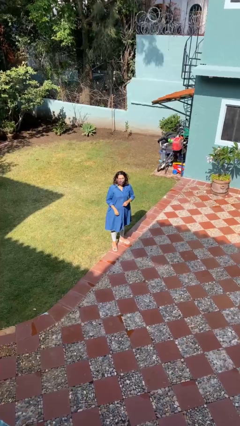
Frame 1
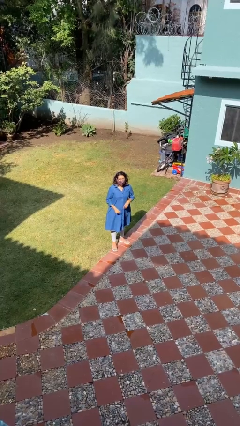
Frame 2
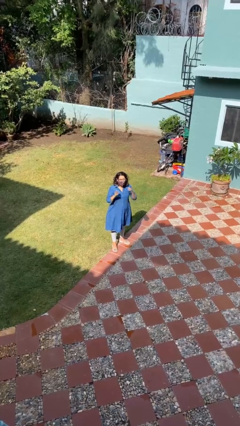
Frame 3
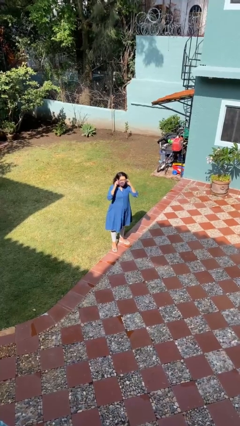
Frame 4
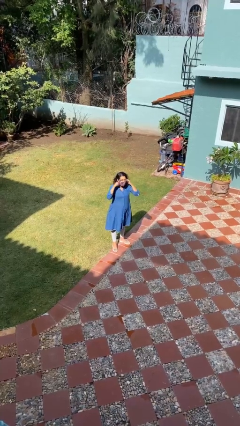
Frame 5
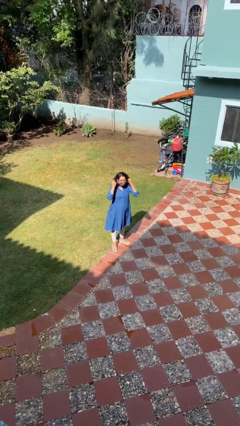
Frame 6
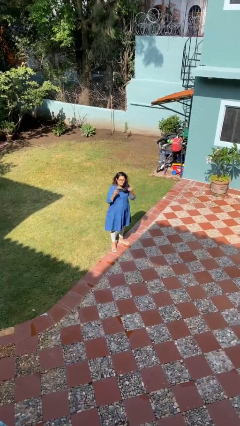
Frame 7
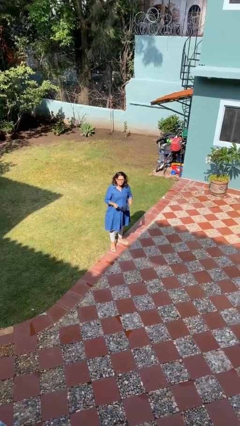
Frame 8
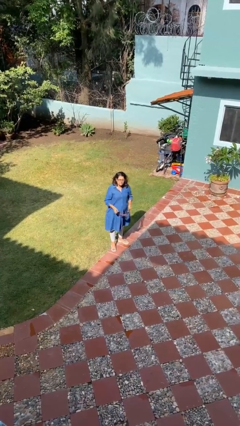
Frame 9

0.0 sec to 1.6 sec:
person takes off facemask

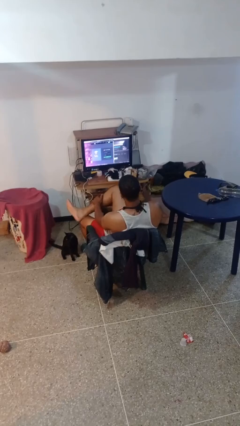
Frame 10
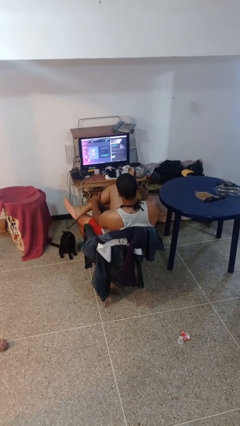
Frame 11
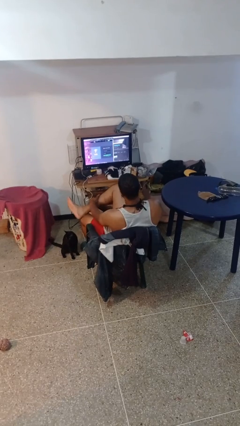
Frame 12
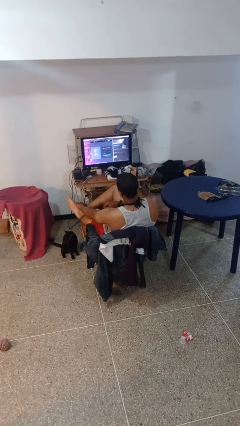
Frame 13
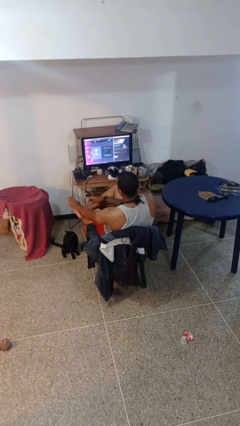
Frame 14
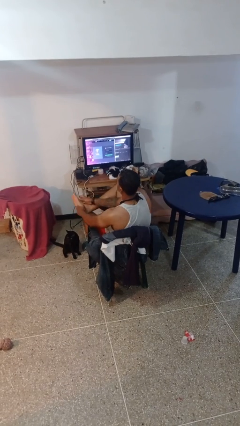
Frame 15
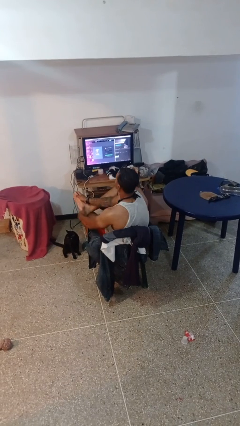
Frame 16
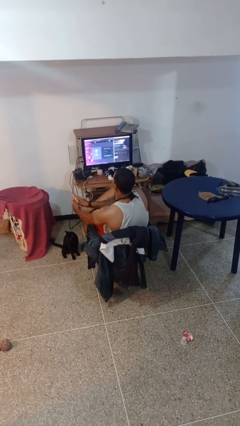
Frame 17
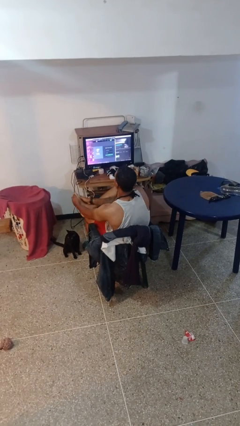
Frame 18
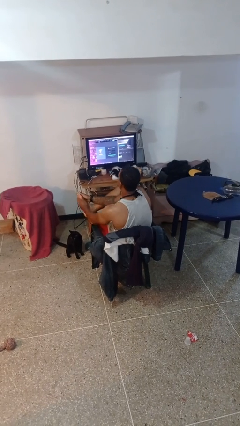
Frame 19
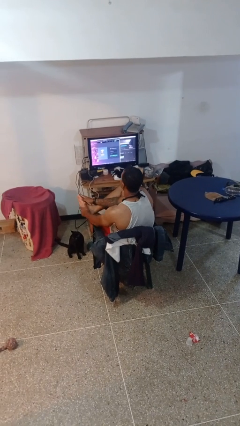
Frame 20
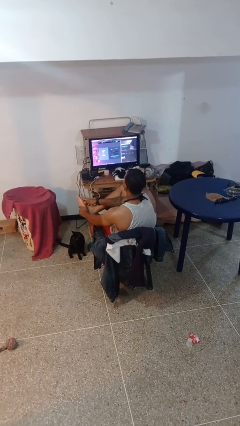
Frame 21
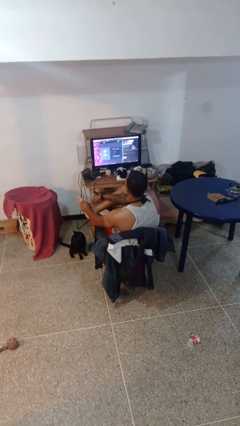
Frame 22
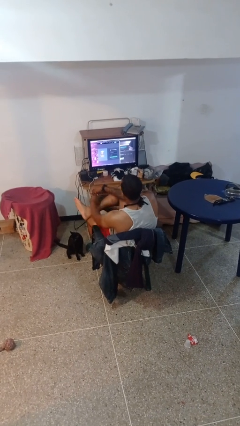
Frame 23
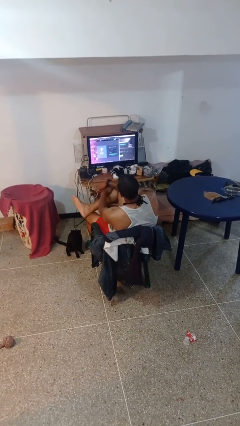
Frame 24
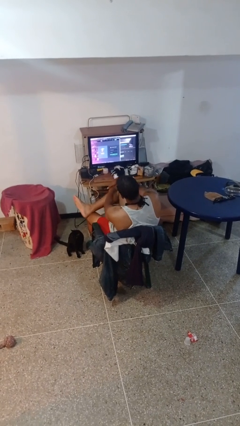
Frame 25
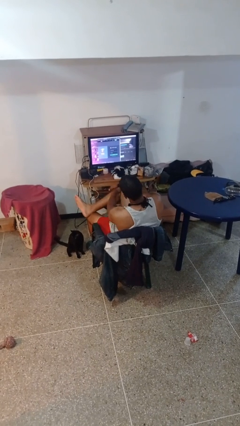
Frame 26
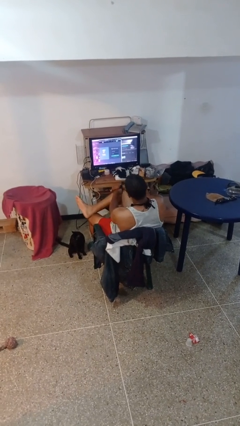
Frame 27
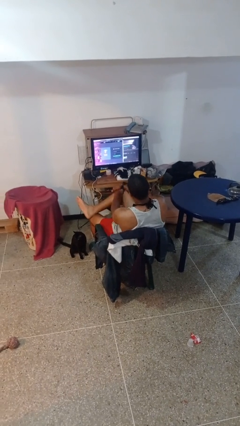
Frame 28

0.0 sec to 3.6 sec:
person rubs foot

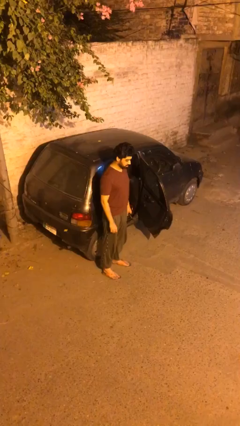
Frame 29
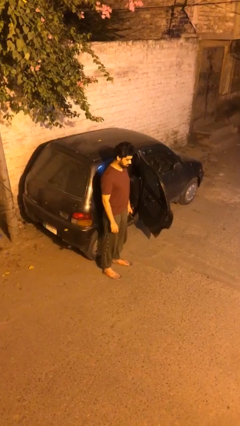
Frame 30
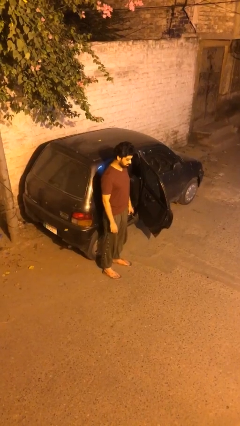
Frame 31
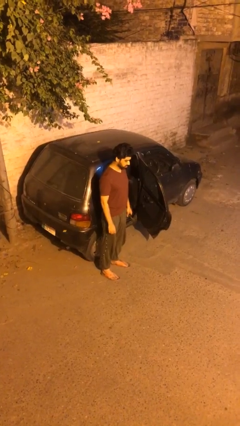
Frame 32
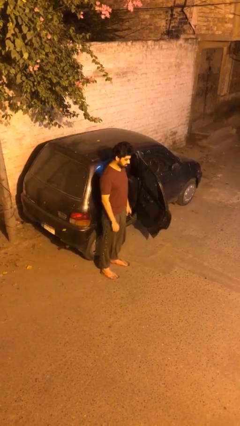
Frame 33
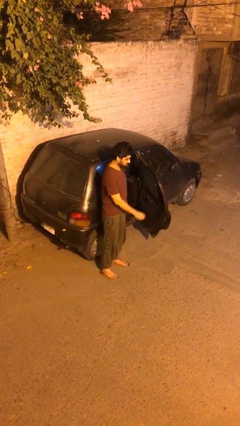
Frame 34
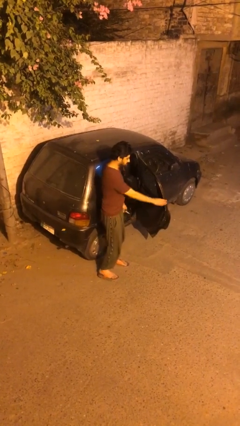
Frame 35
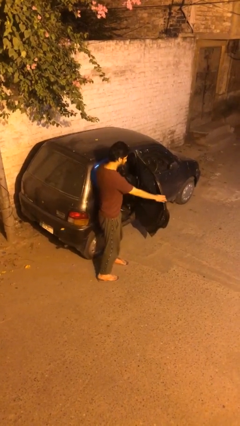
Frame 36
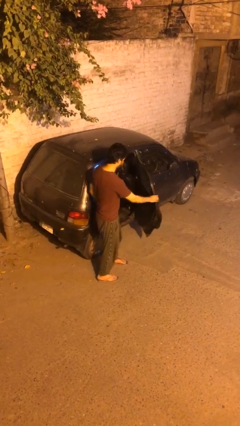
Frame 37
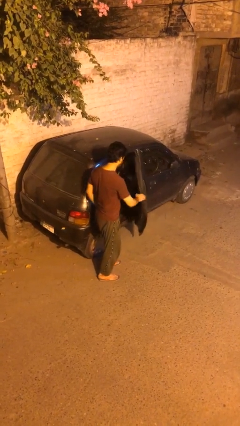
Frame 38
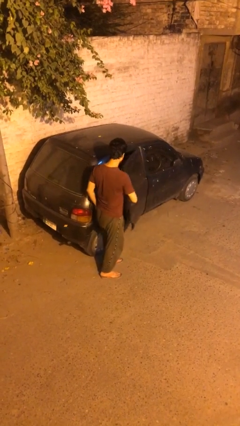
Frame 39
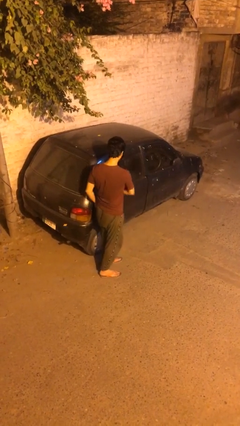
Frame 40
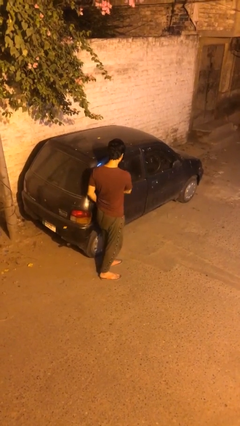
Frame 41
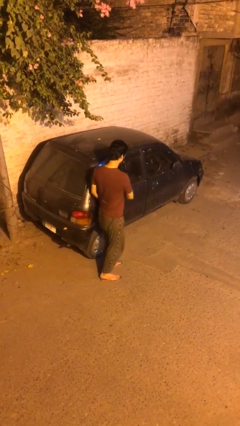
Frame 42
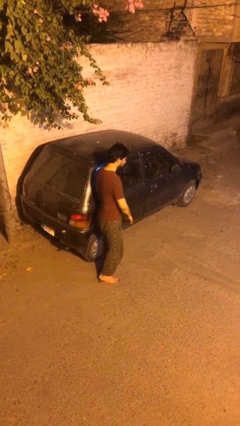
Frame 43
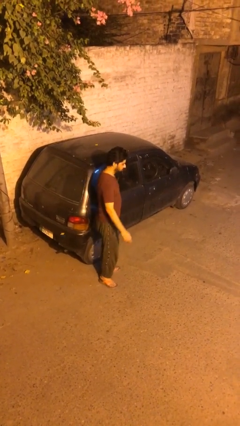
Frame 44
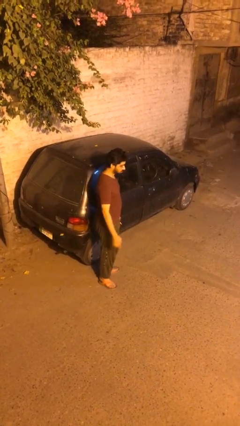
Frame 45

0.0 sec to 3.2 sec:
person closes car door

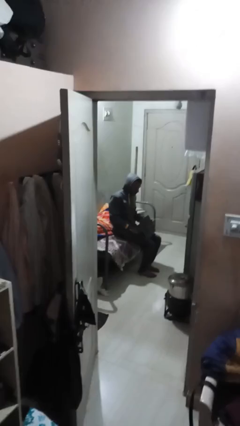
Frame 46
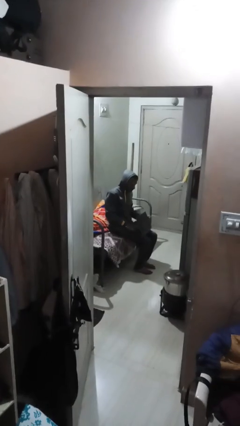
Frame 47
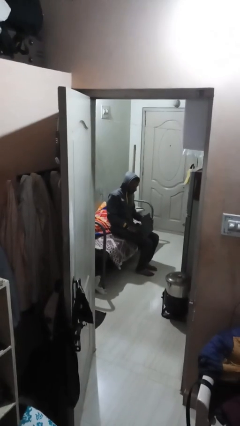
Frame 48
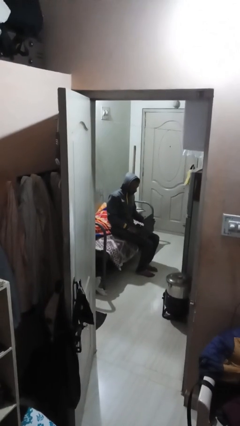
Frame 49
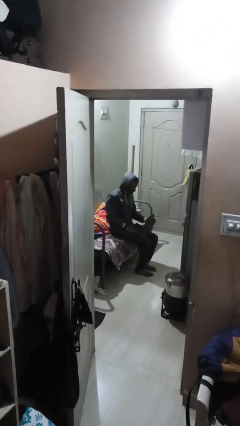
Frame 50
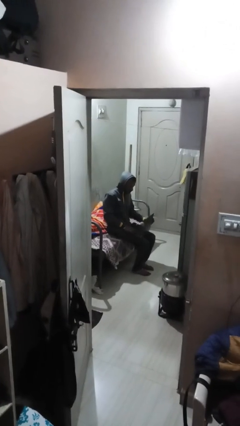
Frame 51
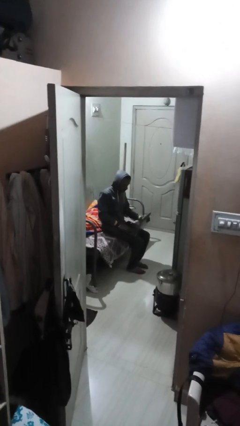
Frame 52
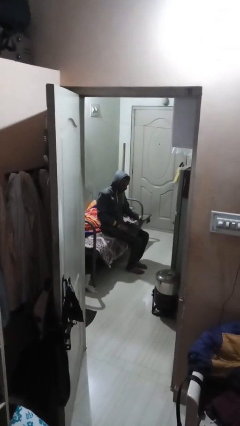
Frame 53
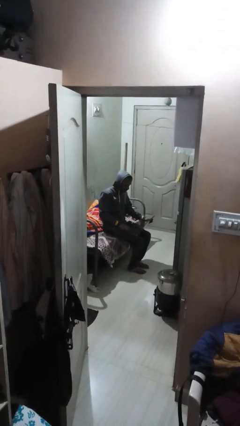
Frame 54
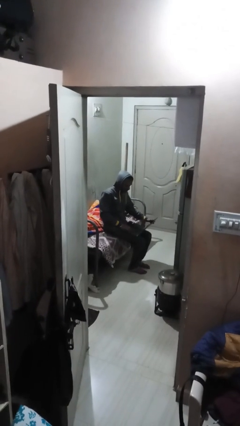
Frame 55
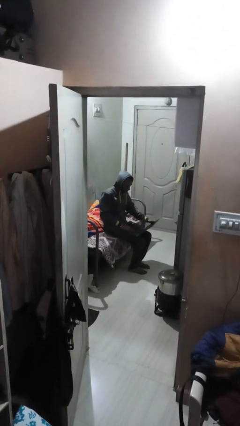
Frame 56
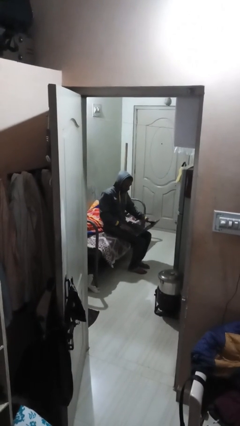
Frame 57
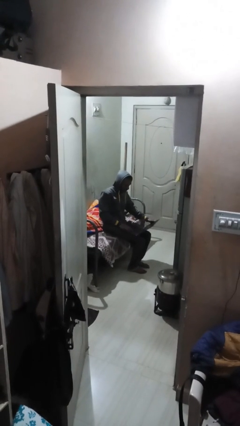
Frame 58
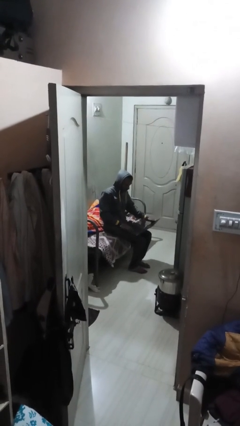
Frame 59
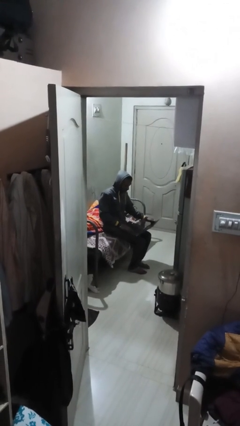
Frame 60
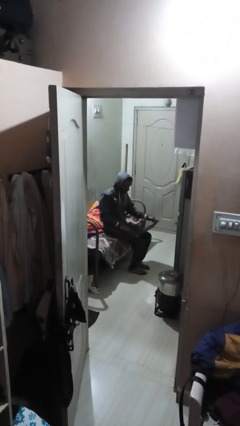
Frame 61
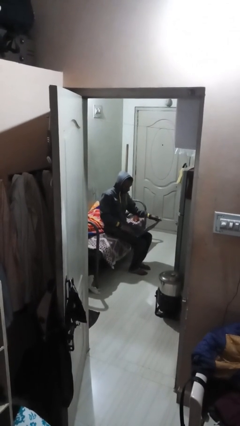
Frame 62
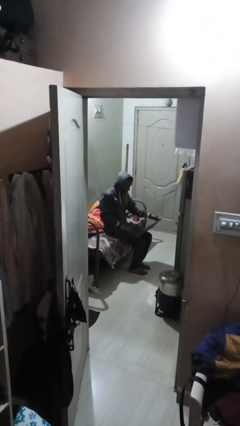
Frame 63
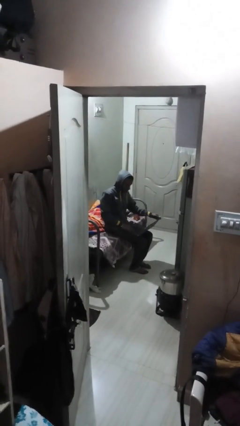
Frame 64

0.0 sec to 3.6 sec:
person interacts with laptop

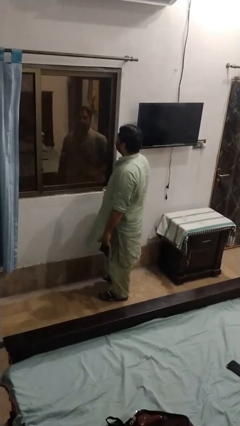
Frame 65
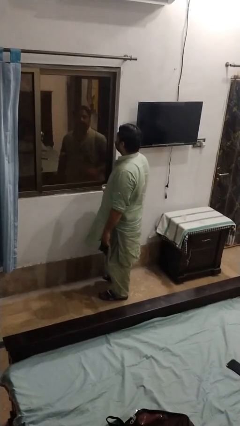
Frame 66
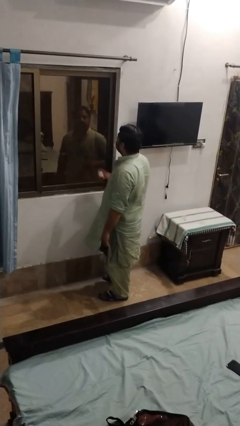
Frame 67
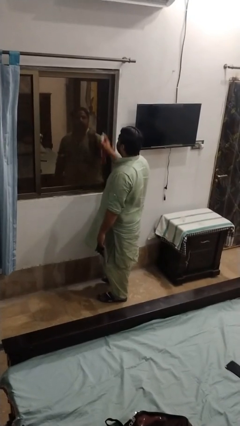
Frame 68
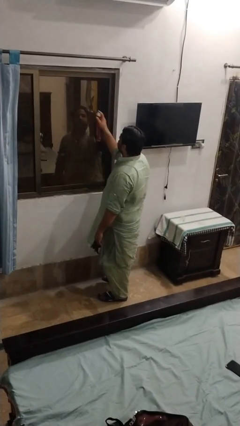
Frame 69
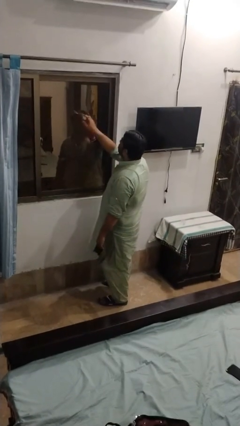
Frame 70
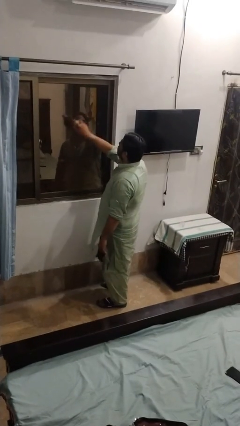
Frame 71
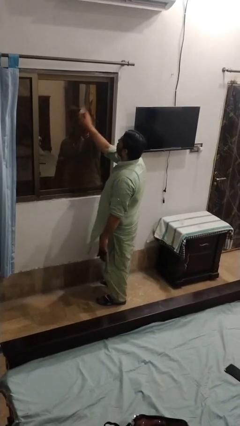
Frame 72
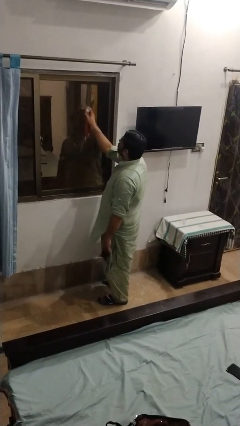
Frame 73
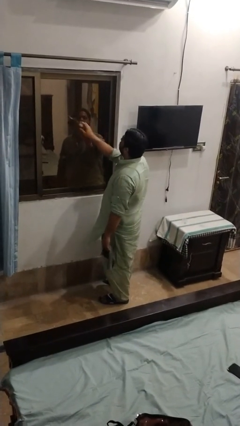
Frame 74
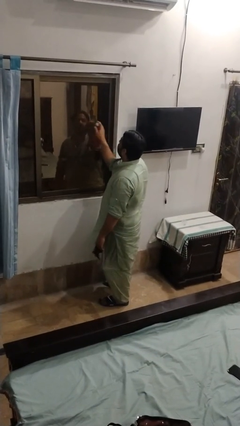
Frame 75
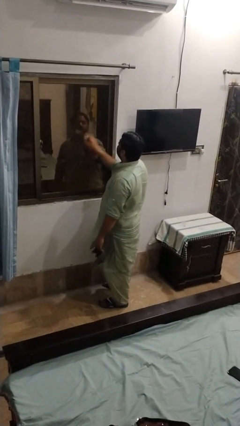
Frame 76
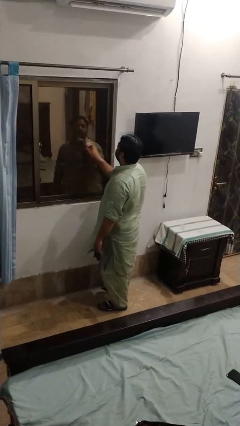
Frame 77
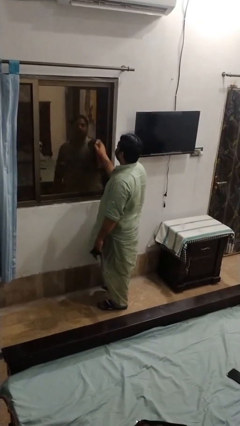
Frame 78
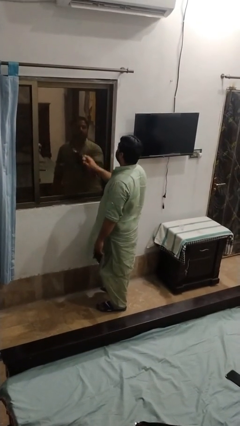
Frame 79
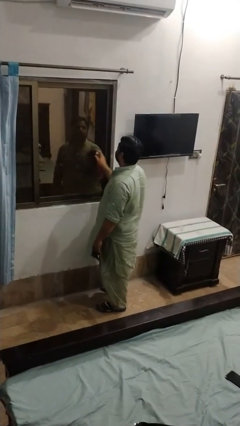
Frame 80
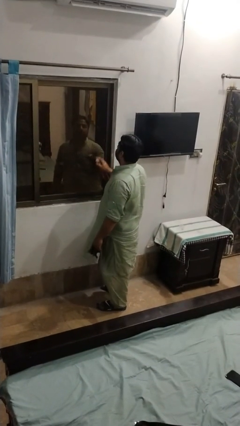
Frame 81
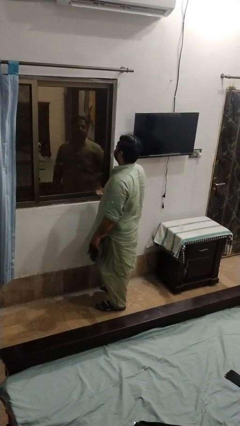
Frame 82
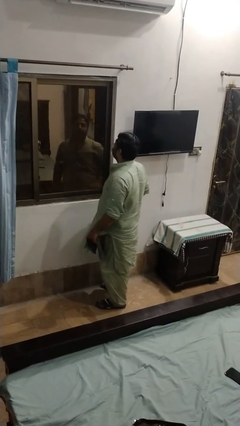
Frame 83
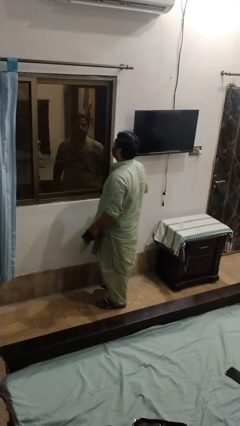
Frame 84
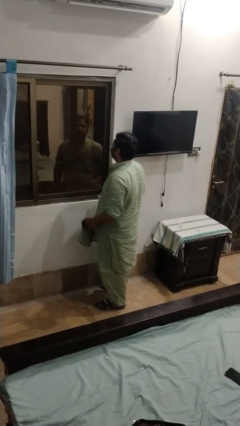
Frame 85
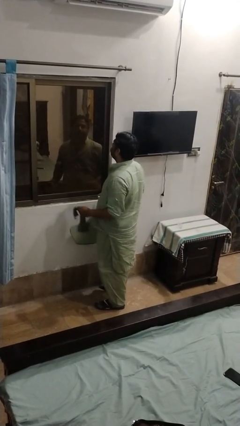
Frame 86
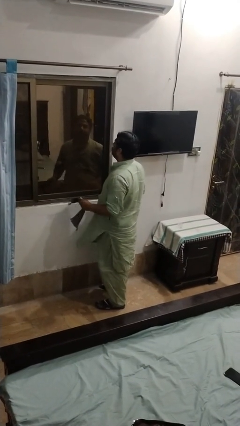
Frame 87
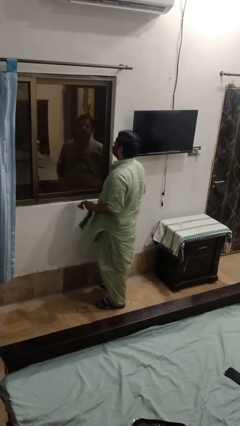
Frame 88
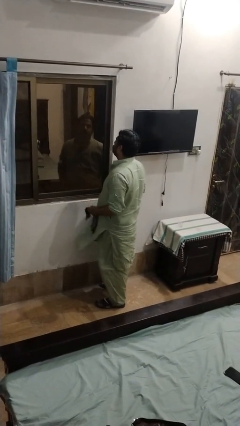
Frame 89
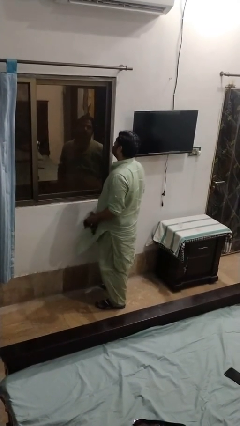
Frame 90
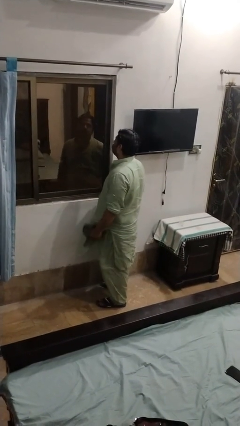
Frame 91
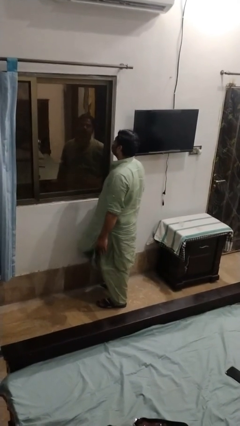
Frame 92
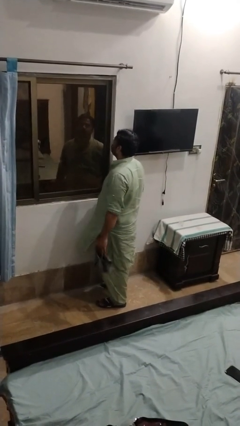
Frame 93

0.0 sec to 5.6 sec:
person sprays from bottle
